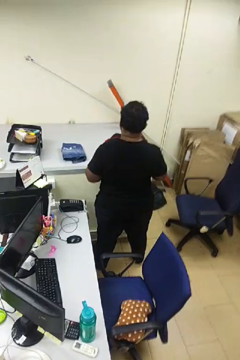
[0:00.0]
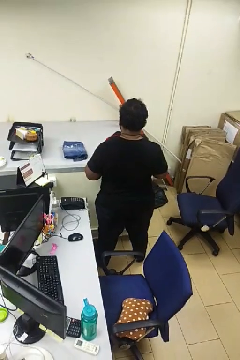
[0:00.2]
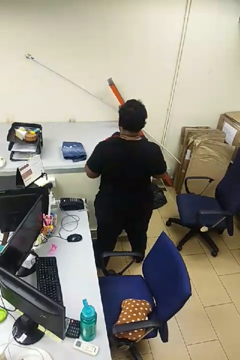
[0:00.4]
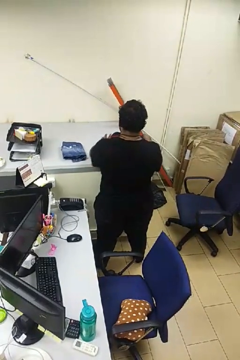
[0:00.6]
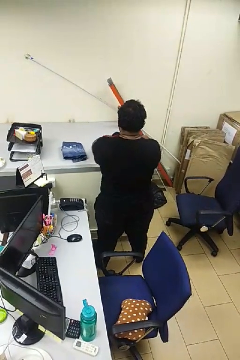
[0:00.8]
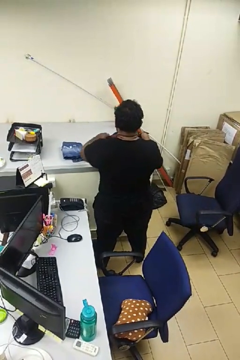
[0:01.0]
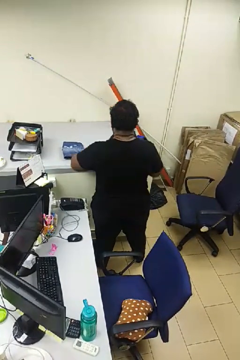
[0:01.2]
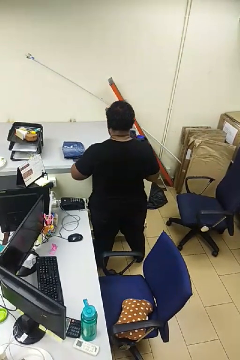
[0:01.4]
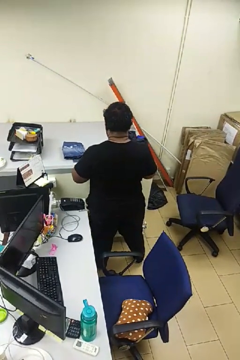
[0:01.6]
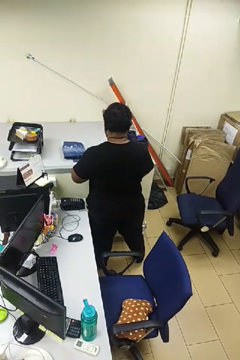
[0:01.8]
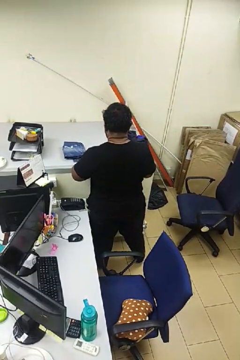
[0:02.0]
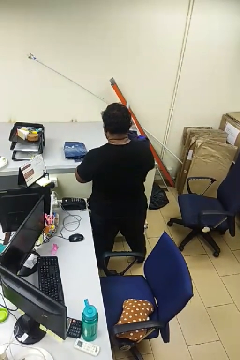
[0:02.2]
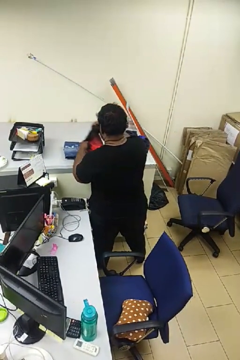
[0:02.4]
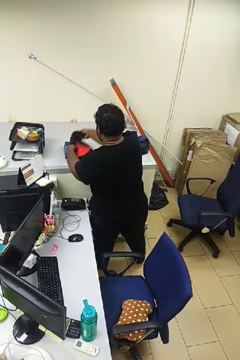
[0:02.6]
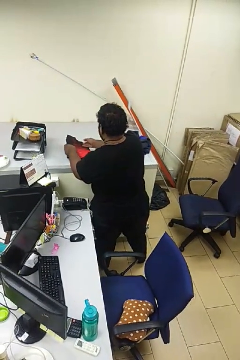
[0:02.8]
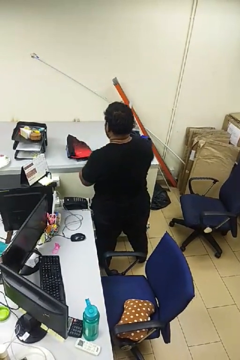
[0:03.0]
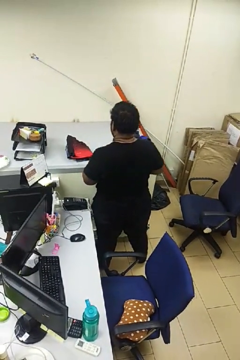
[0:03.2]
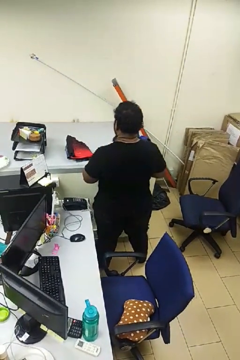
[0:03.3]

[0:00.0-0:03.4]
person folds shirt

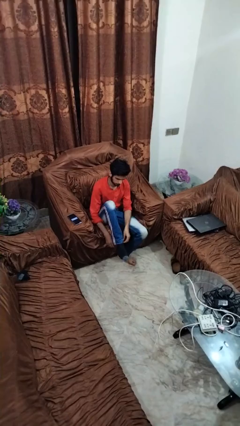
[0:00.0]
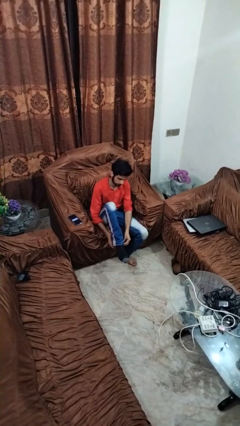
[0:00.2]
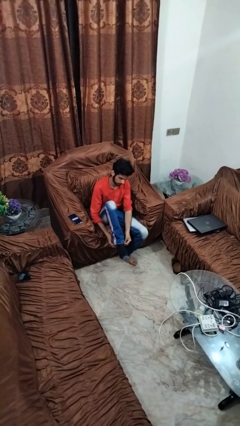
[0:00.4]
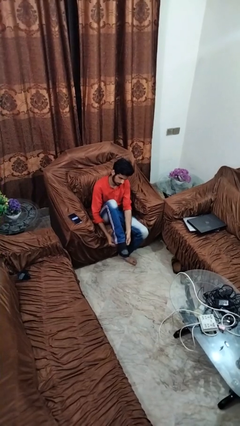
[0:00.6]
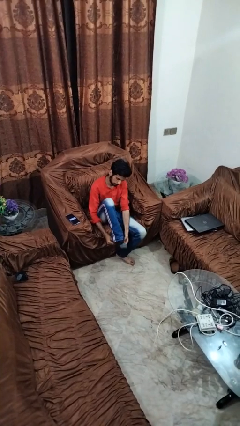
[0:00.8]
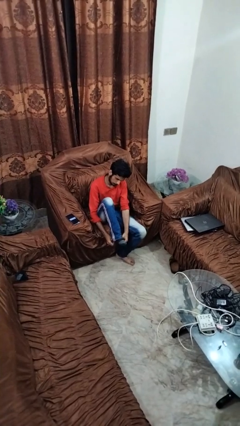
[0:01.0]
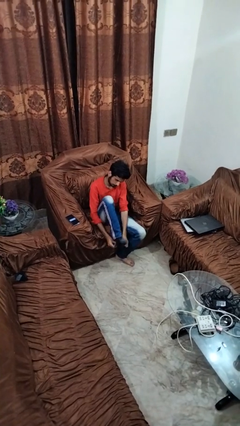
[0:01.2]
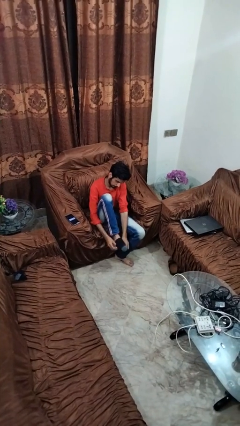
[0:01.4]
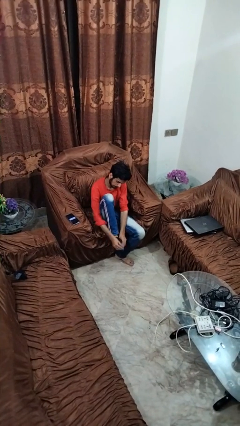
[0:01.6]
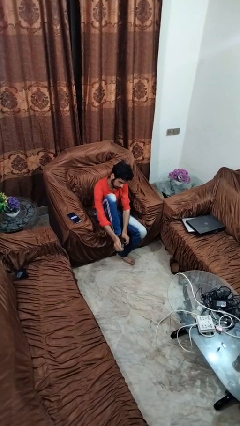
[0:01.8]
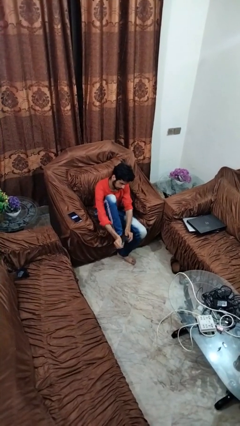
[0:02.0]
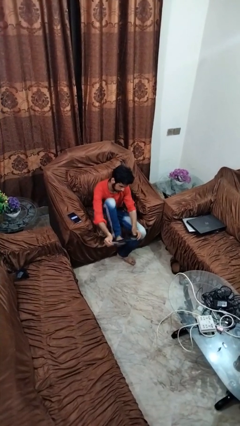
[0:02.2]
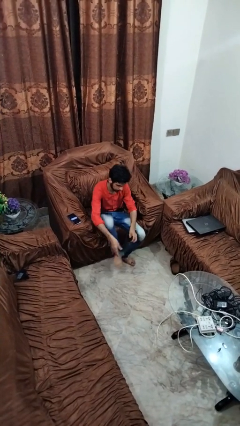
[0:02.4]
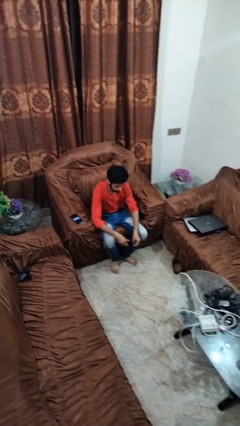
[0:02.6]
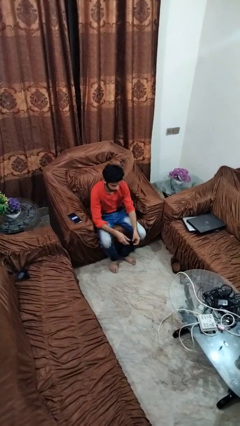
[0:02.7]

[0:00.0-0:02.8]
person takes off socks

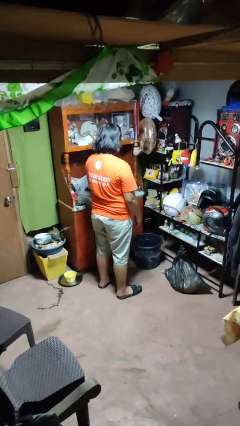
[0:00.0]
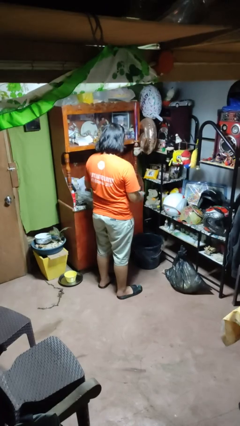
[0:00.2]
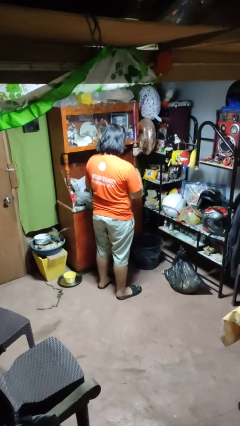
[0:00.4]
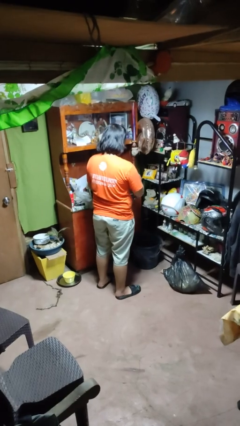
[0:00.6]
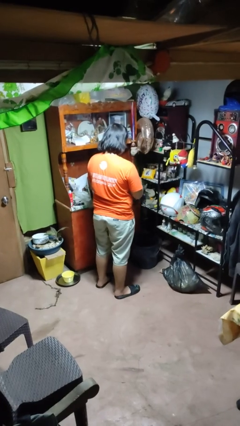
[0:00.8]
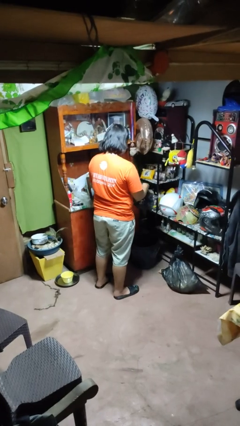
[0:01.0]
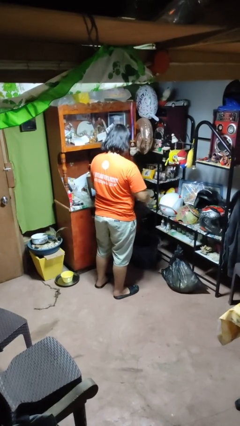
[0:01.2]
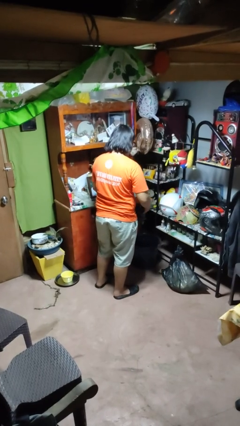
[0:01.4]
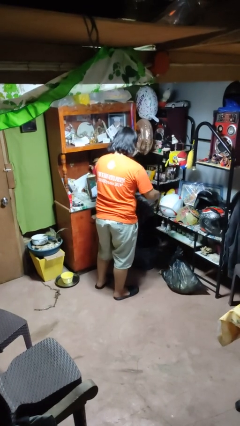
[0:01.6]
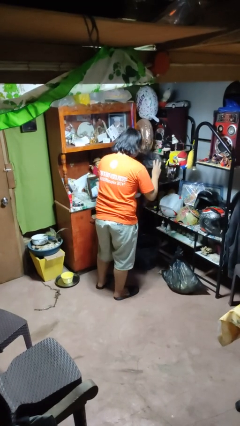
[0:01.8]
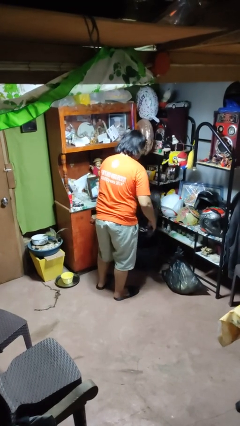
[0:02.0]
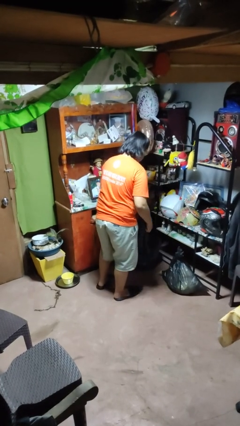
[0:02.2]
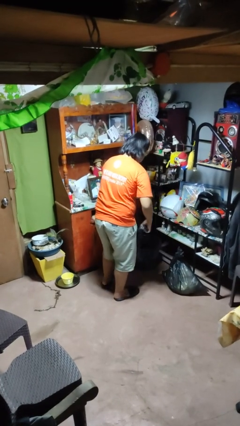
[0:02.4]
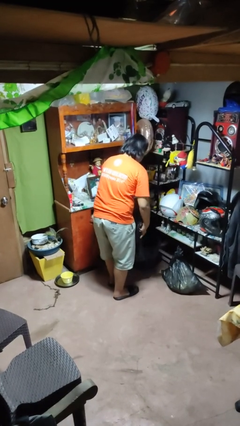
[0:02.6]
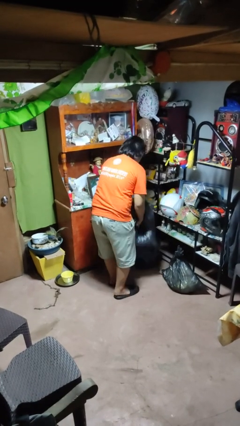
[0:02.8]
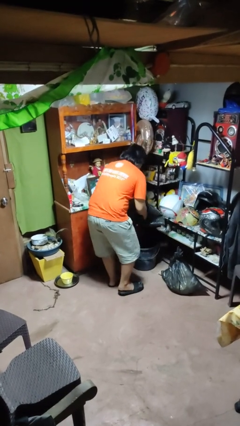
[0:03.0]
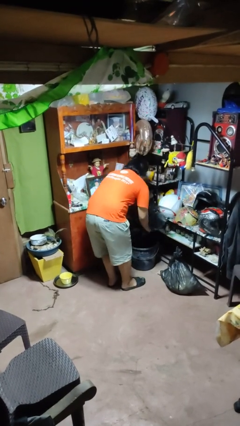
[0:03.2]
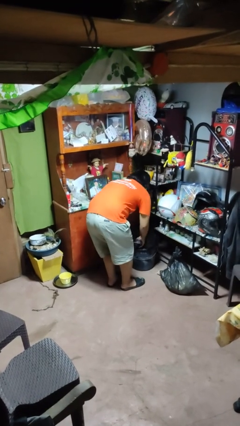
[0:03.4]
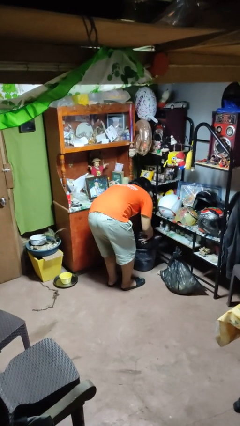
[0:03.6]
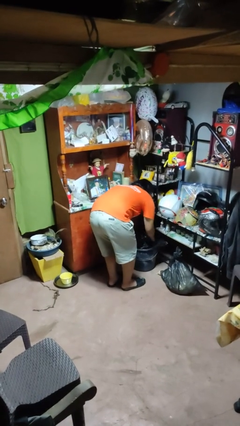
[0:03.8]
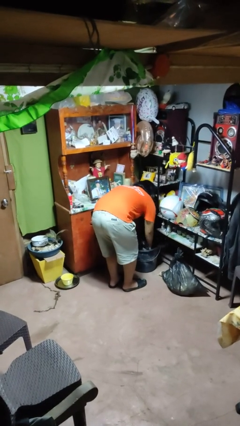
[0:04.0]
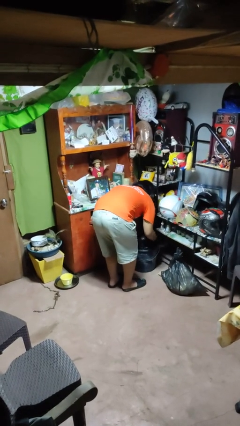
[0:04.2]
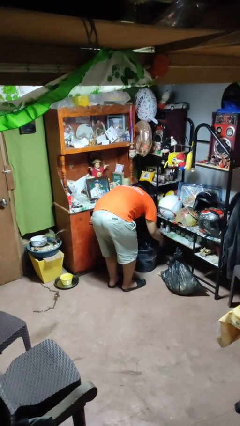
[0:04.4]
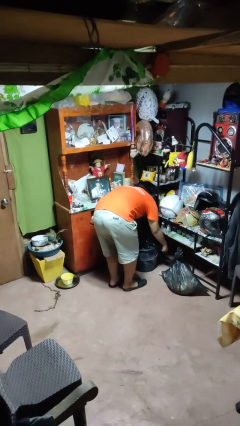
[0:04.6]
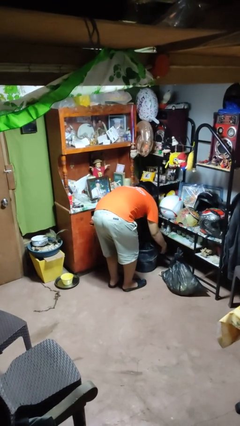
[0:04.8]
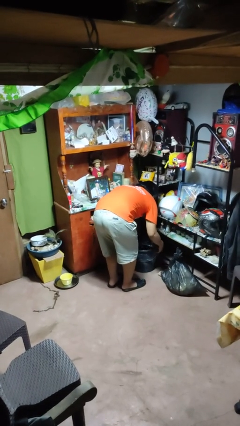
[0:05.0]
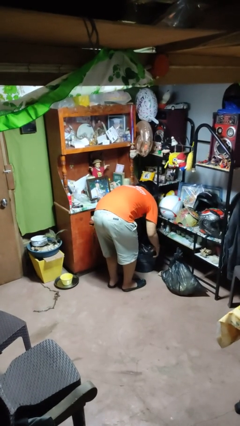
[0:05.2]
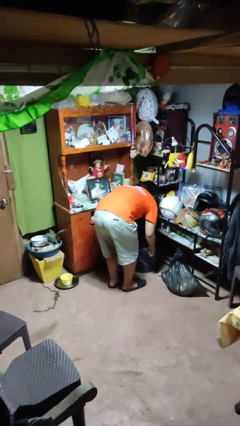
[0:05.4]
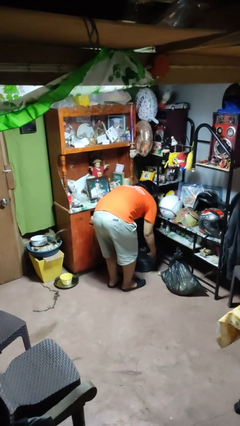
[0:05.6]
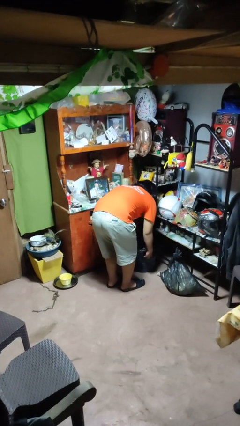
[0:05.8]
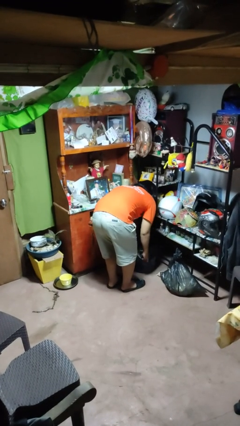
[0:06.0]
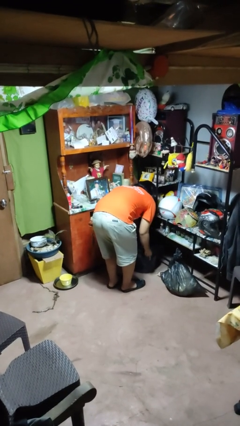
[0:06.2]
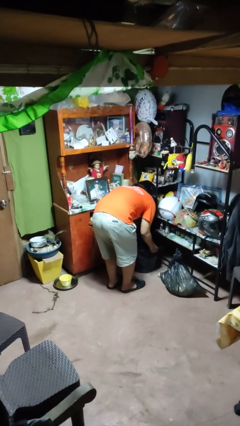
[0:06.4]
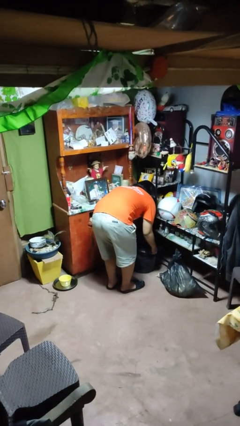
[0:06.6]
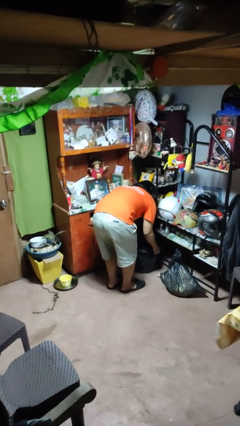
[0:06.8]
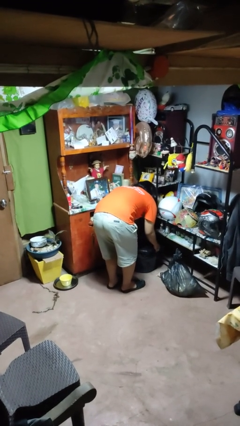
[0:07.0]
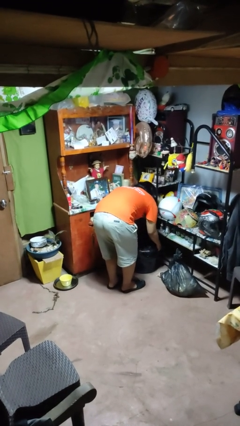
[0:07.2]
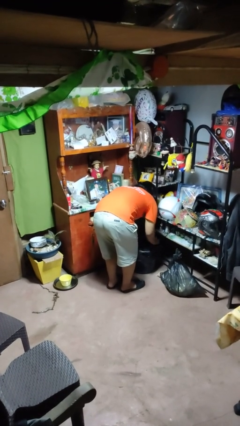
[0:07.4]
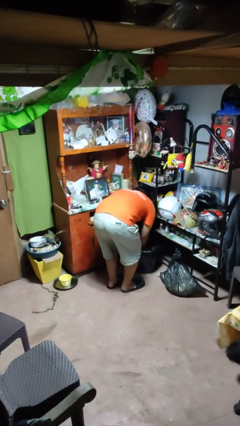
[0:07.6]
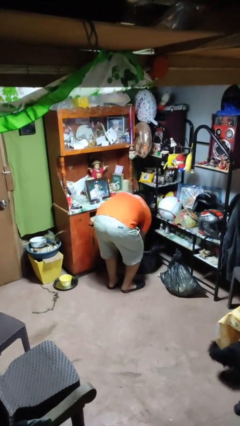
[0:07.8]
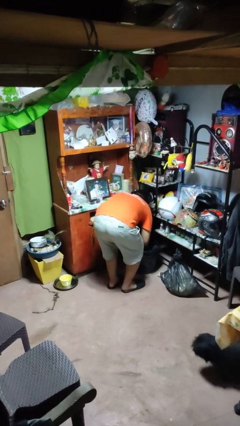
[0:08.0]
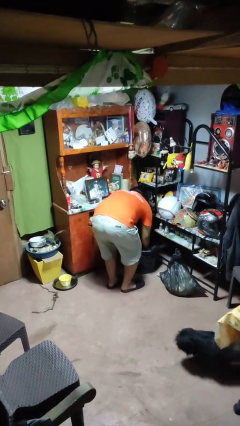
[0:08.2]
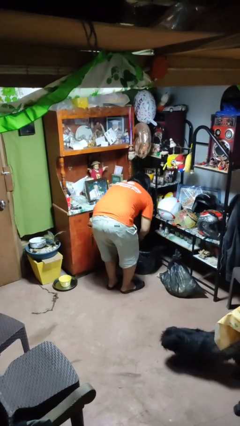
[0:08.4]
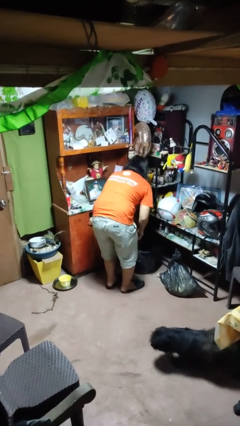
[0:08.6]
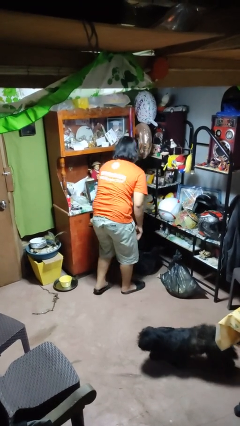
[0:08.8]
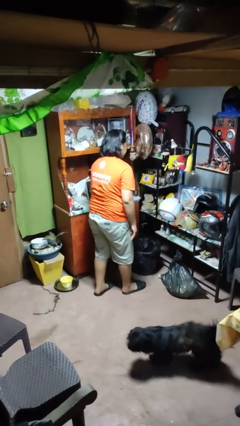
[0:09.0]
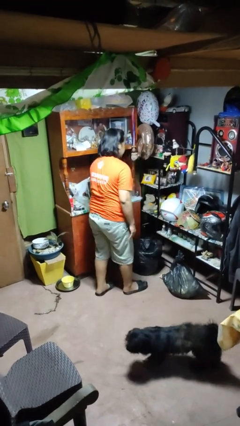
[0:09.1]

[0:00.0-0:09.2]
person inserts trashbag into trashcan

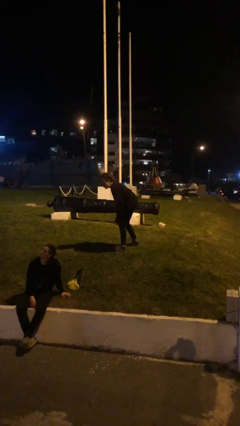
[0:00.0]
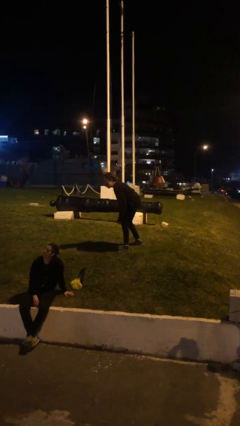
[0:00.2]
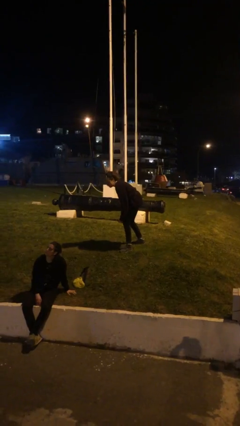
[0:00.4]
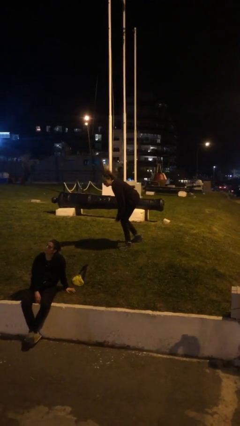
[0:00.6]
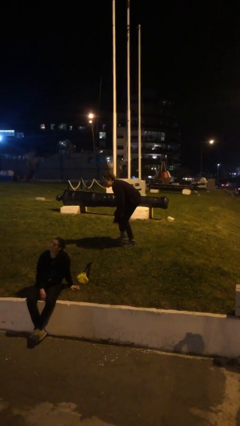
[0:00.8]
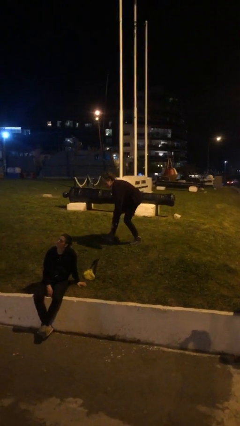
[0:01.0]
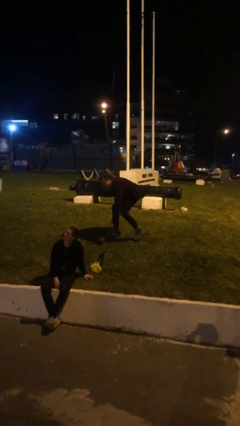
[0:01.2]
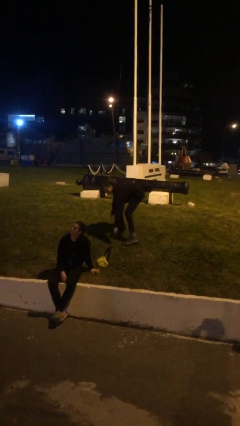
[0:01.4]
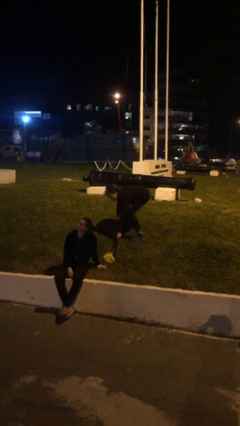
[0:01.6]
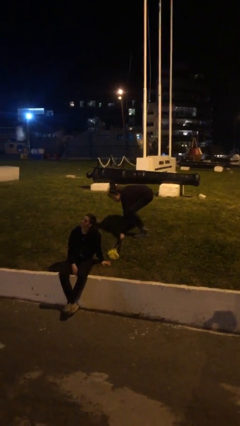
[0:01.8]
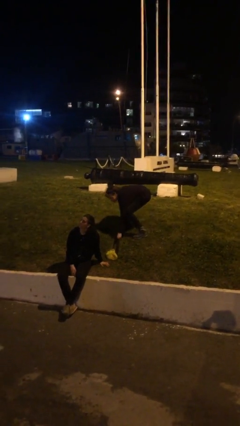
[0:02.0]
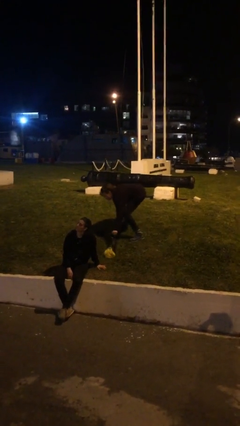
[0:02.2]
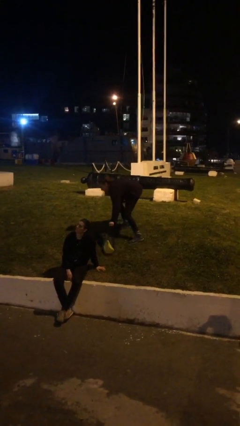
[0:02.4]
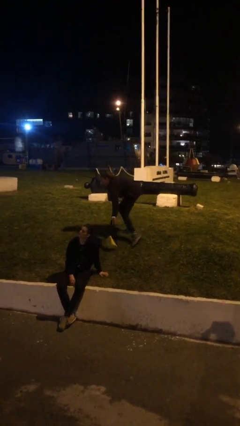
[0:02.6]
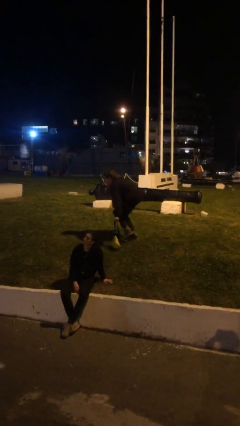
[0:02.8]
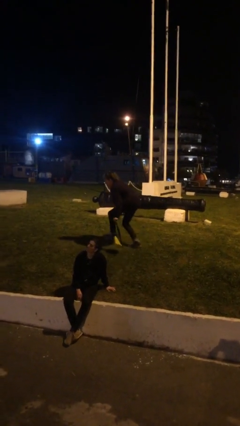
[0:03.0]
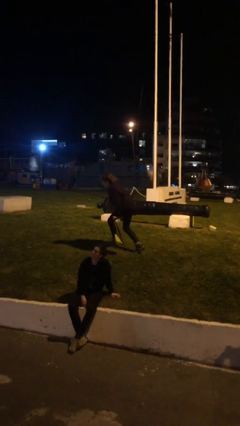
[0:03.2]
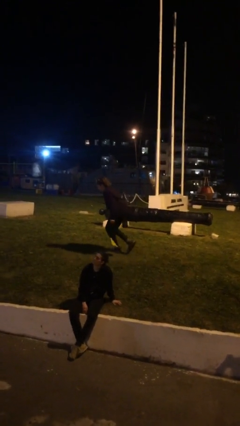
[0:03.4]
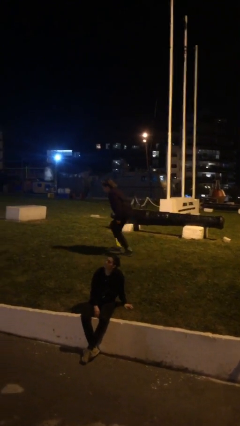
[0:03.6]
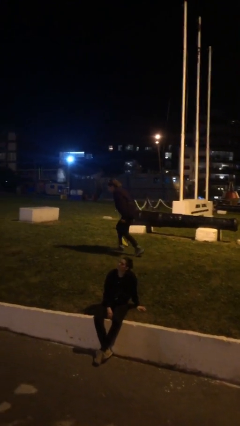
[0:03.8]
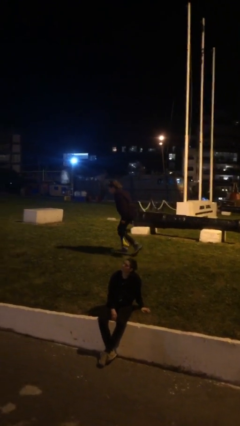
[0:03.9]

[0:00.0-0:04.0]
person steals object from person
